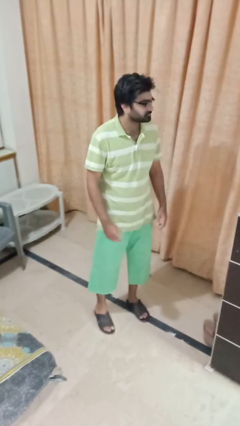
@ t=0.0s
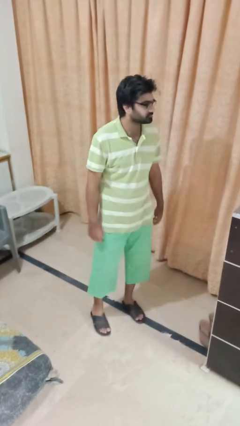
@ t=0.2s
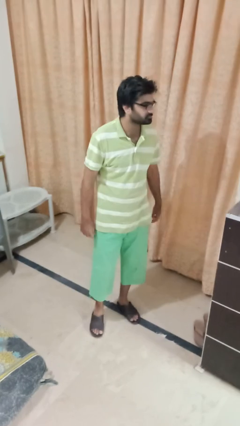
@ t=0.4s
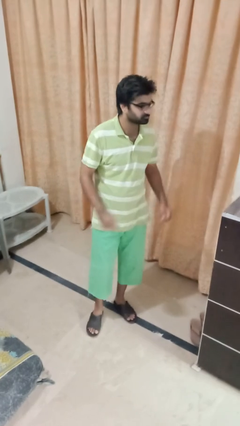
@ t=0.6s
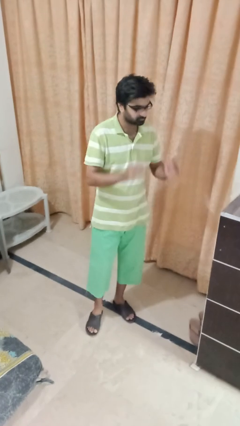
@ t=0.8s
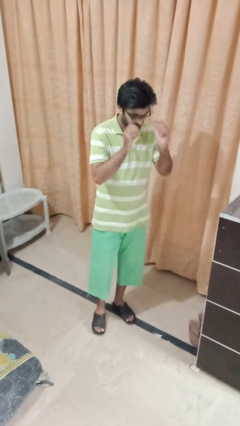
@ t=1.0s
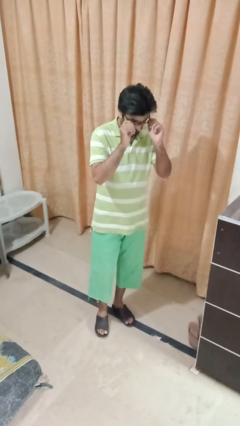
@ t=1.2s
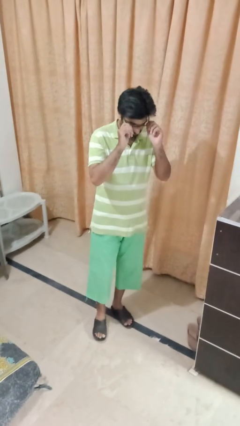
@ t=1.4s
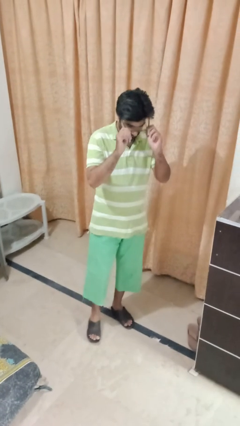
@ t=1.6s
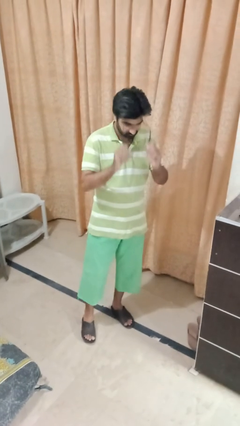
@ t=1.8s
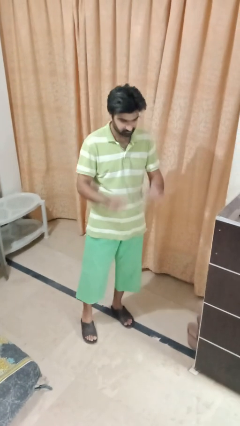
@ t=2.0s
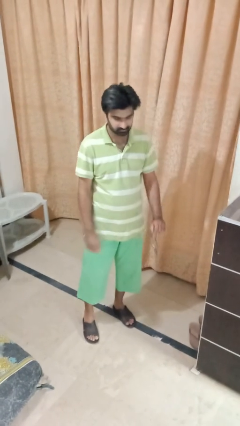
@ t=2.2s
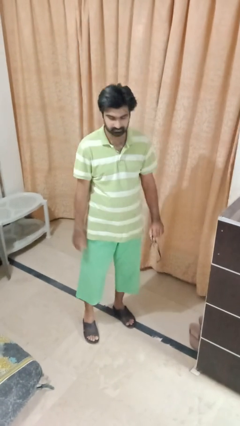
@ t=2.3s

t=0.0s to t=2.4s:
person takes off glasses

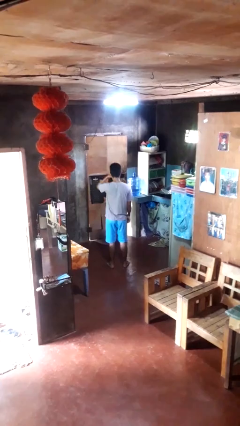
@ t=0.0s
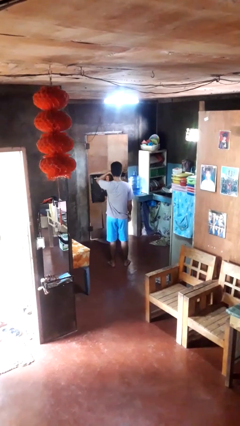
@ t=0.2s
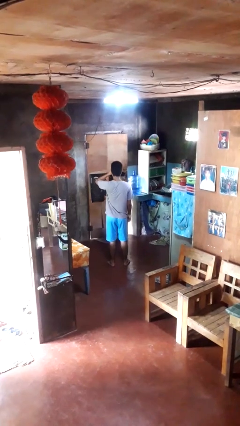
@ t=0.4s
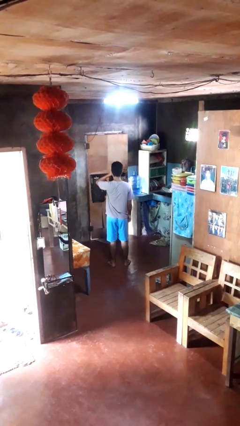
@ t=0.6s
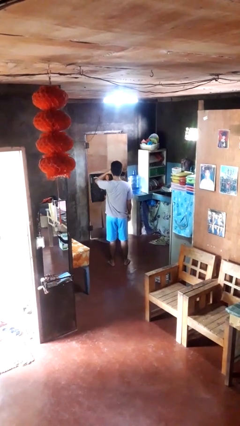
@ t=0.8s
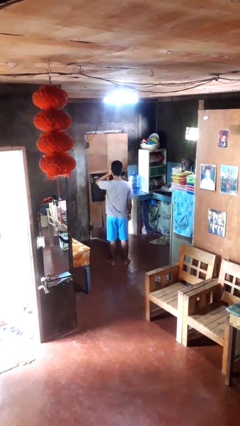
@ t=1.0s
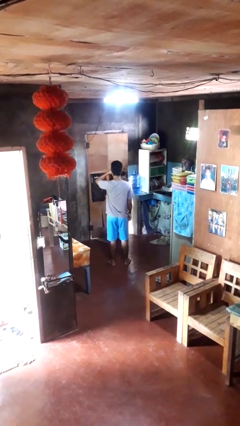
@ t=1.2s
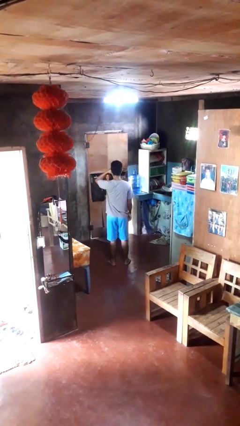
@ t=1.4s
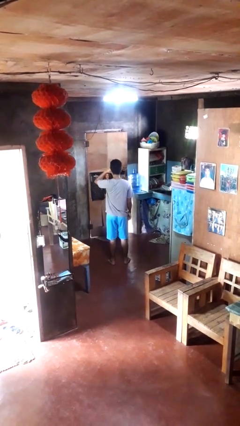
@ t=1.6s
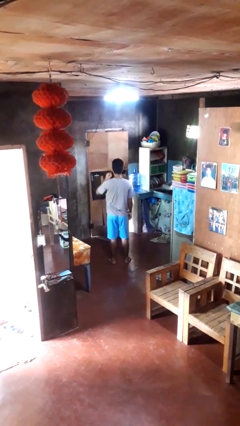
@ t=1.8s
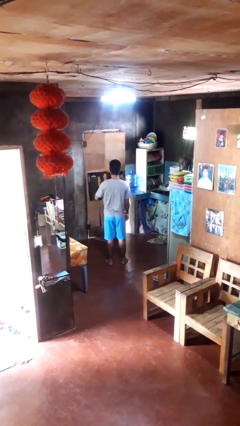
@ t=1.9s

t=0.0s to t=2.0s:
person rubs eyes

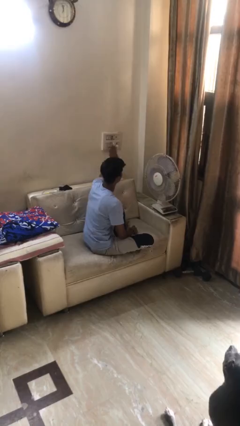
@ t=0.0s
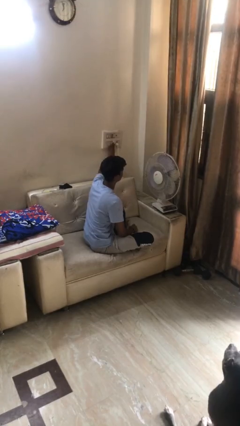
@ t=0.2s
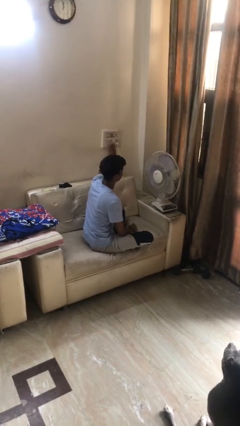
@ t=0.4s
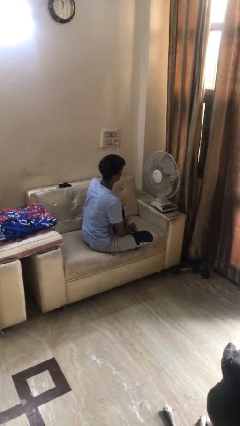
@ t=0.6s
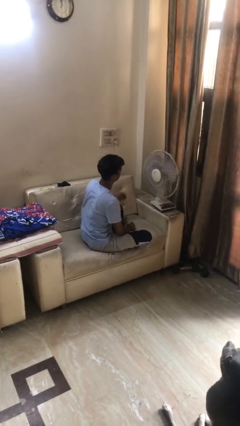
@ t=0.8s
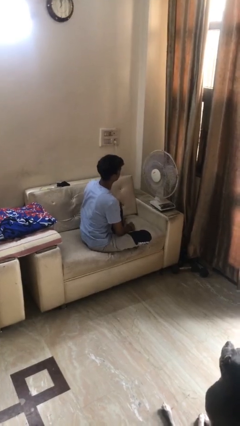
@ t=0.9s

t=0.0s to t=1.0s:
person turns on fan

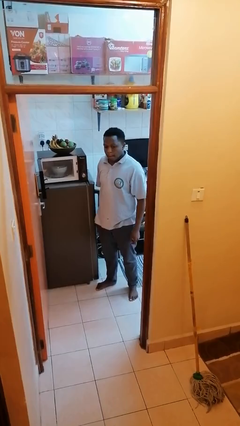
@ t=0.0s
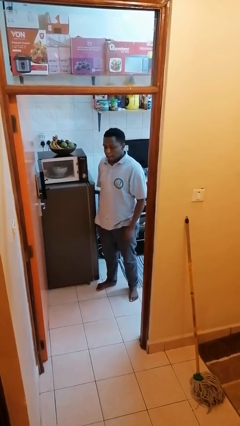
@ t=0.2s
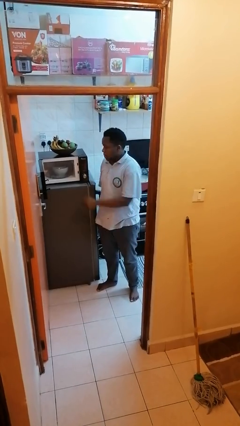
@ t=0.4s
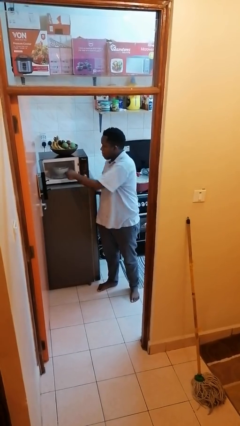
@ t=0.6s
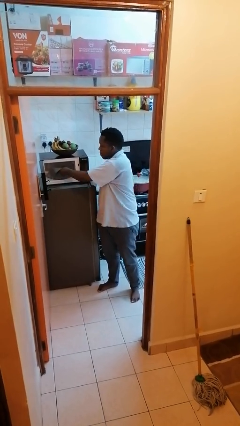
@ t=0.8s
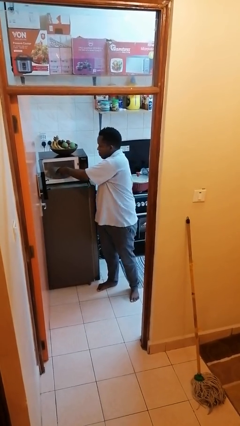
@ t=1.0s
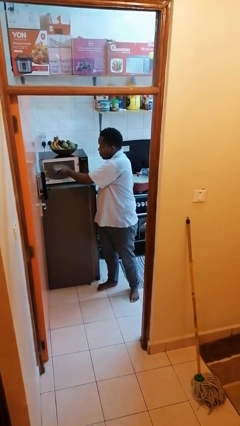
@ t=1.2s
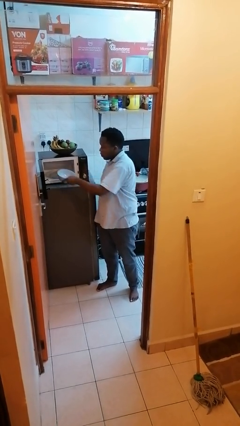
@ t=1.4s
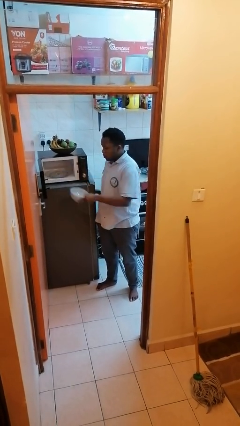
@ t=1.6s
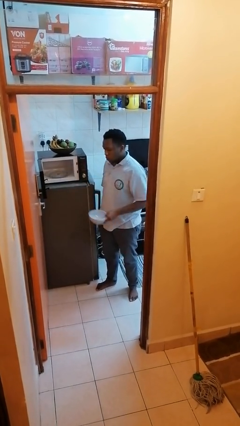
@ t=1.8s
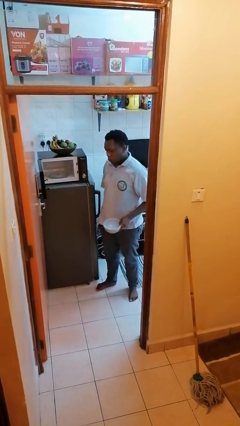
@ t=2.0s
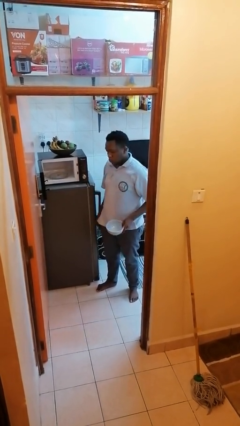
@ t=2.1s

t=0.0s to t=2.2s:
person takes object from microwave

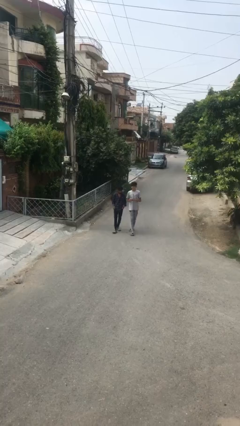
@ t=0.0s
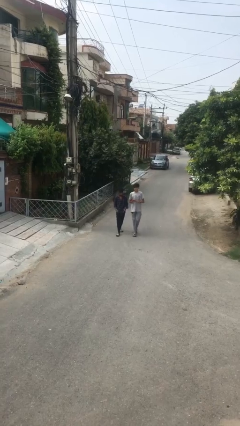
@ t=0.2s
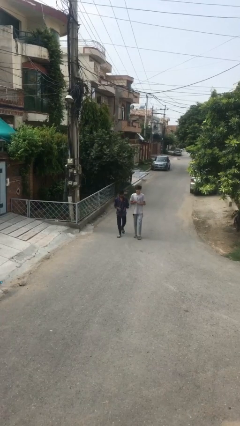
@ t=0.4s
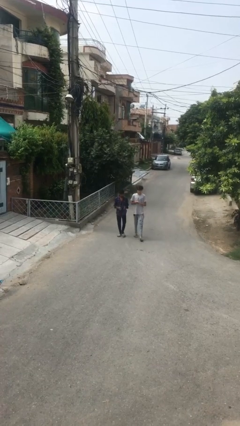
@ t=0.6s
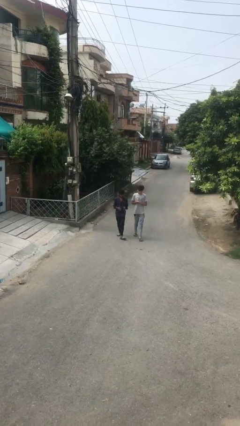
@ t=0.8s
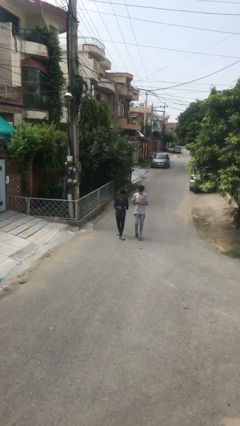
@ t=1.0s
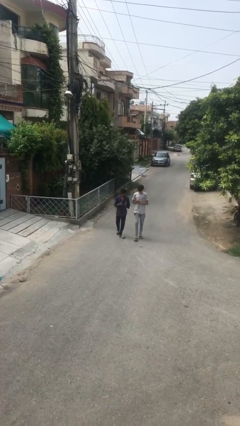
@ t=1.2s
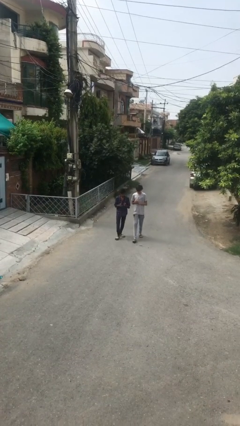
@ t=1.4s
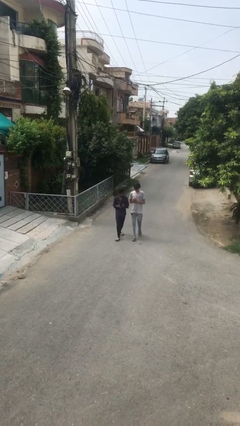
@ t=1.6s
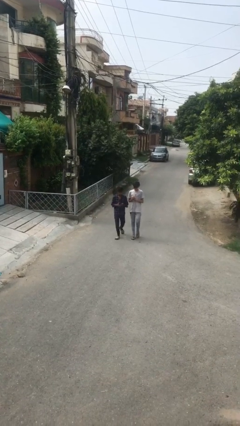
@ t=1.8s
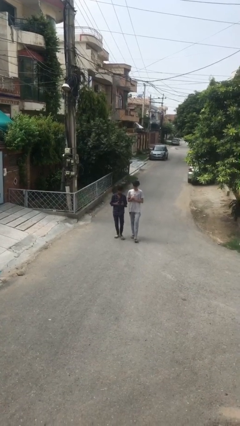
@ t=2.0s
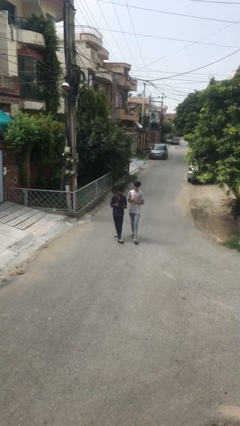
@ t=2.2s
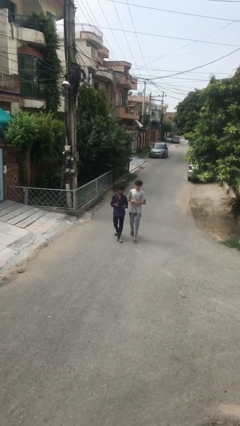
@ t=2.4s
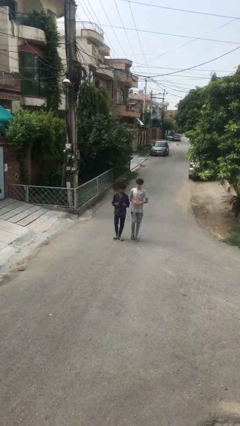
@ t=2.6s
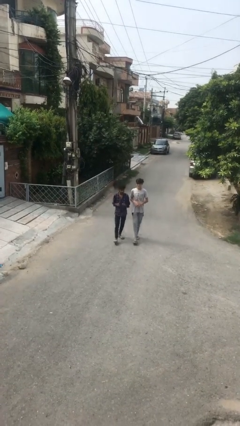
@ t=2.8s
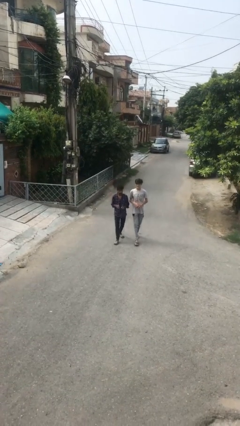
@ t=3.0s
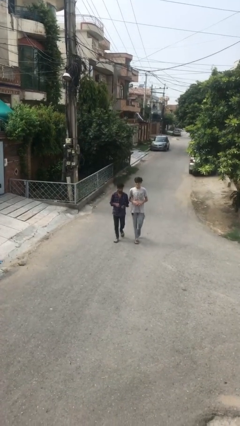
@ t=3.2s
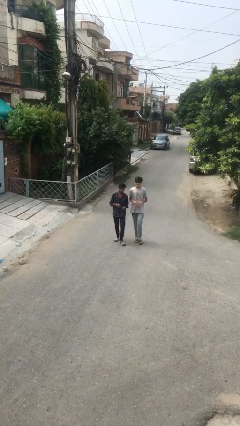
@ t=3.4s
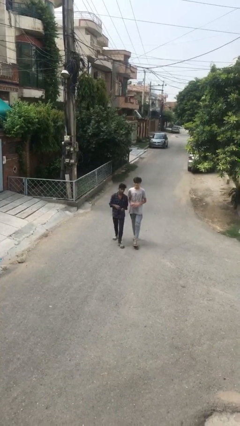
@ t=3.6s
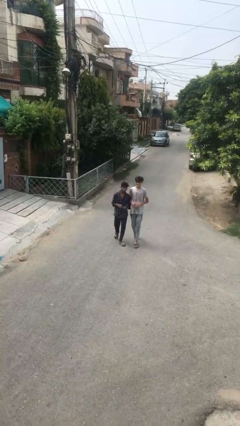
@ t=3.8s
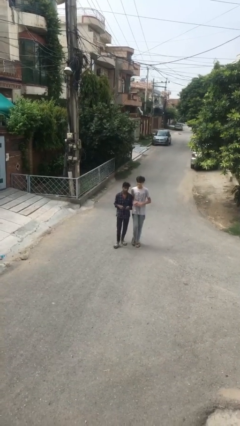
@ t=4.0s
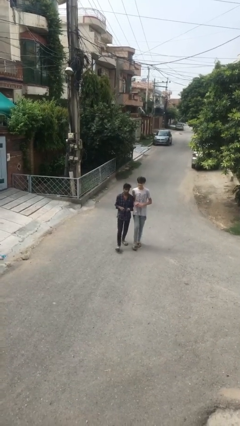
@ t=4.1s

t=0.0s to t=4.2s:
person talks to person

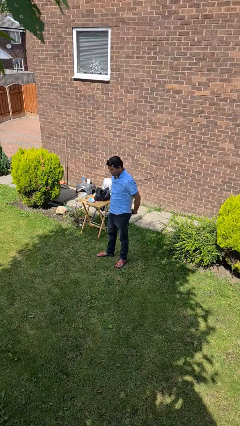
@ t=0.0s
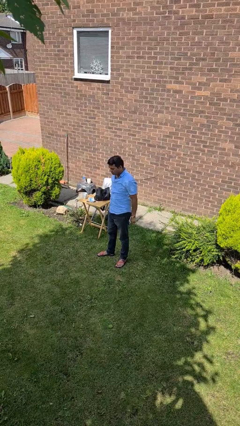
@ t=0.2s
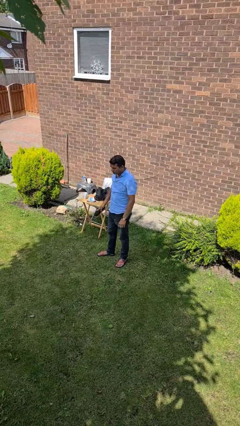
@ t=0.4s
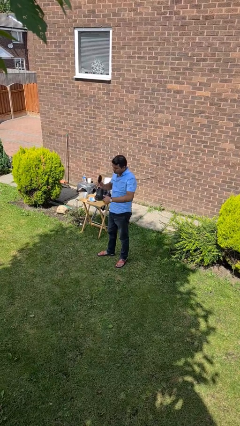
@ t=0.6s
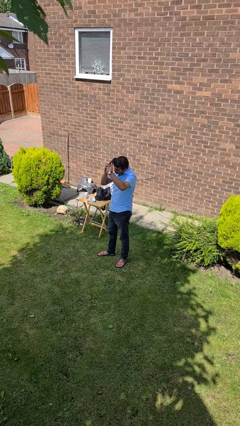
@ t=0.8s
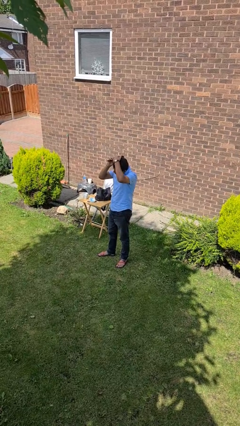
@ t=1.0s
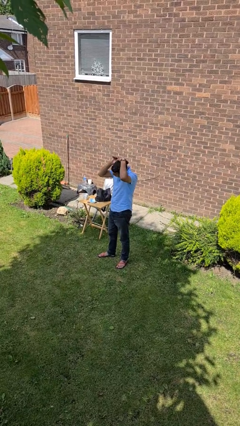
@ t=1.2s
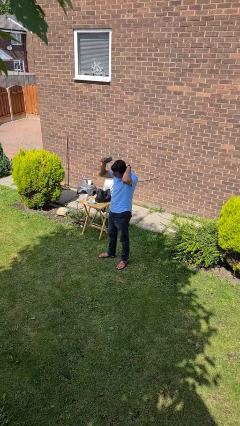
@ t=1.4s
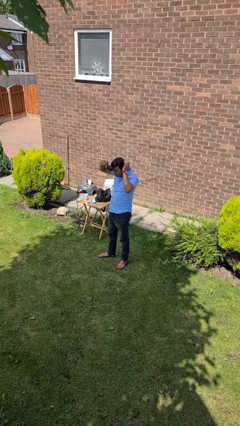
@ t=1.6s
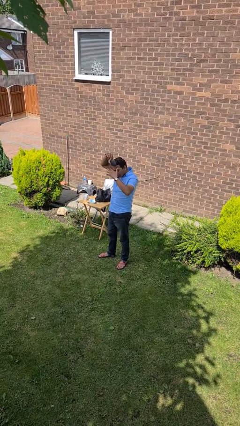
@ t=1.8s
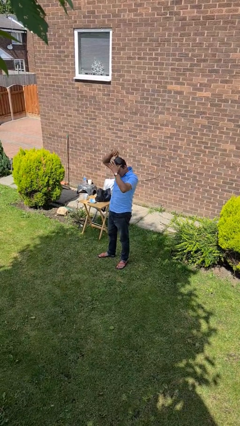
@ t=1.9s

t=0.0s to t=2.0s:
person brushes hair

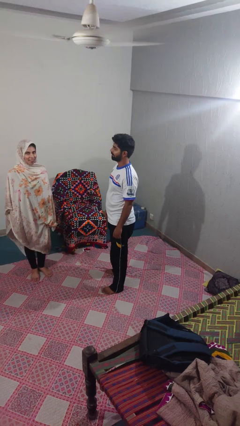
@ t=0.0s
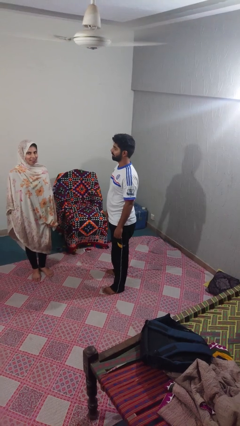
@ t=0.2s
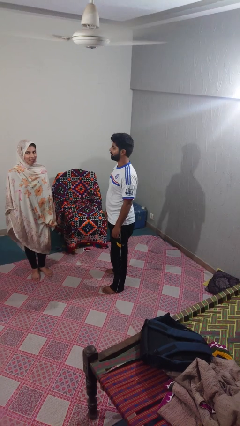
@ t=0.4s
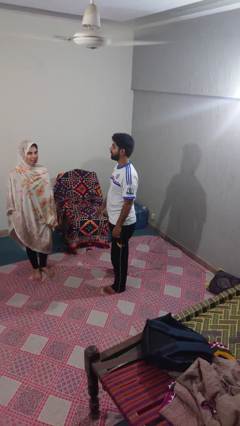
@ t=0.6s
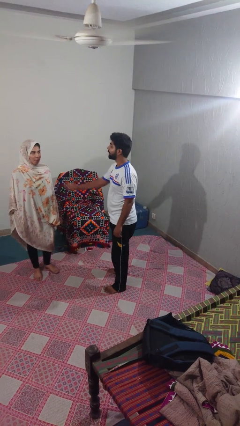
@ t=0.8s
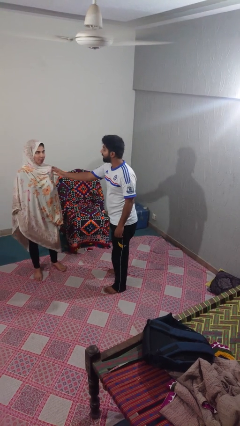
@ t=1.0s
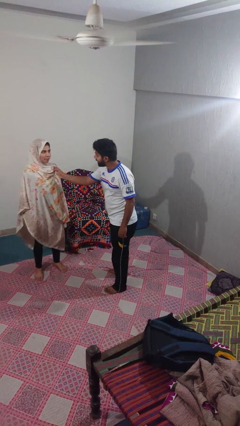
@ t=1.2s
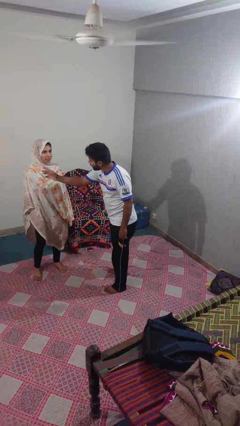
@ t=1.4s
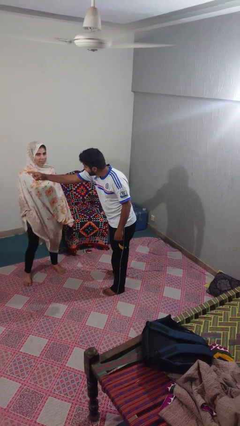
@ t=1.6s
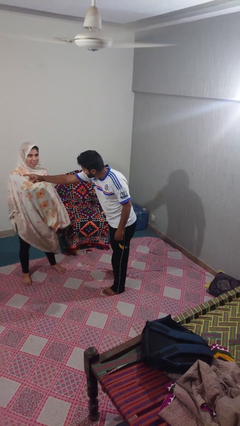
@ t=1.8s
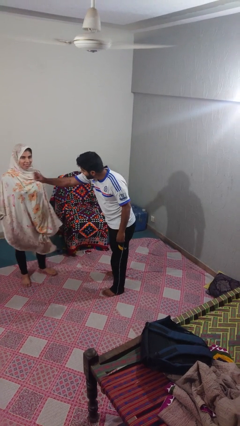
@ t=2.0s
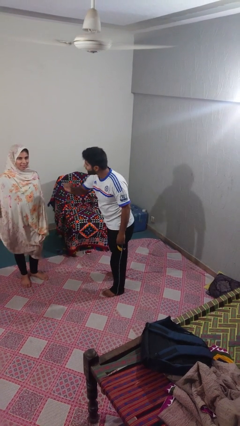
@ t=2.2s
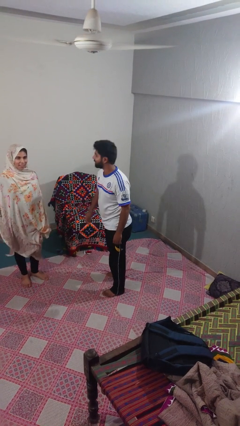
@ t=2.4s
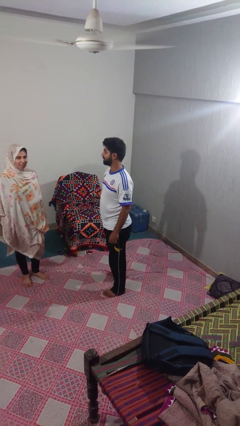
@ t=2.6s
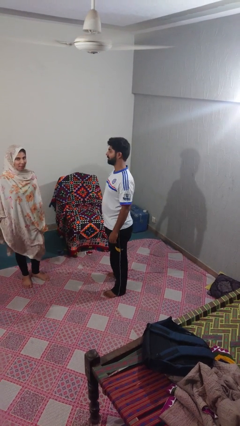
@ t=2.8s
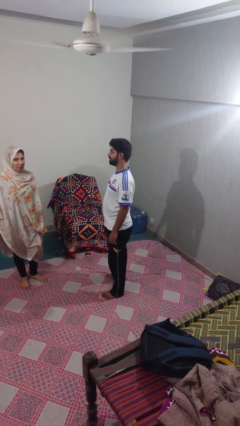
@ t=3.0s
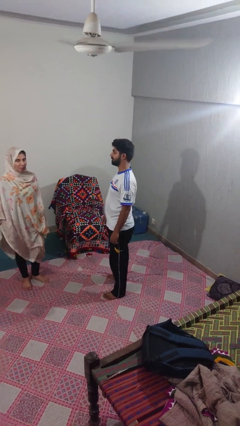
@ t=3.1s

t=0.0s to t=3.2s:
person shoves person

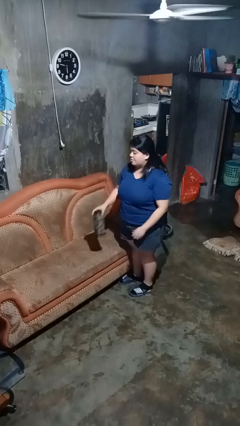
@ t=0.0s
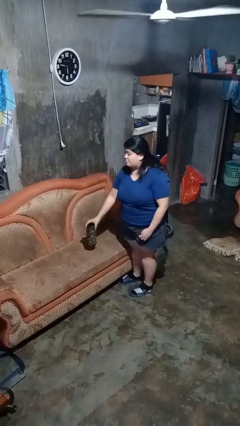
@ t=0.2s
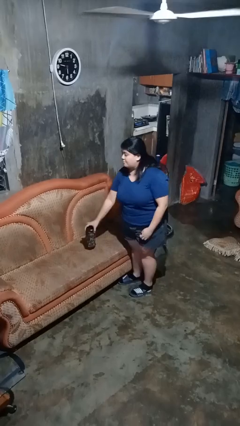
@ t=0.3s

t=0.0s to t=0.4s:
person puts down object on couch
